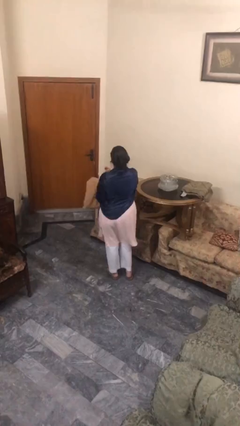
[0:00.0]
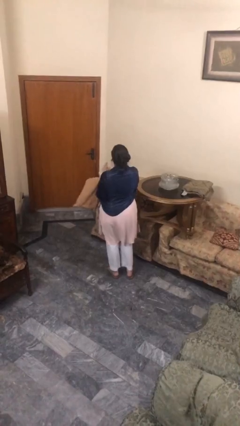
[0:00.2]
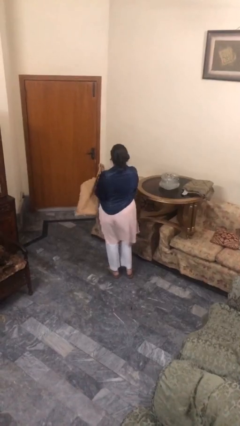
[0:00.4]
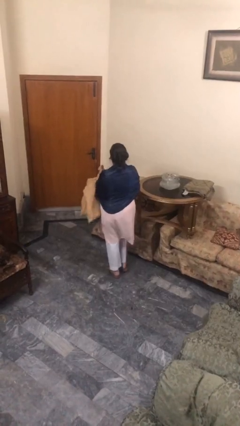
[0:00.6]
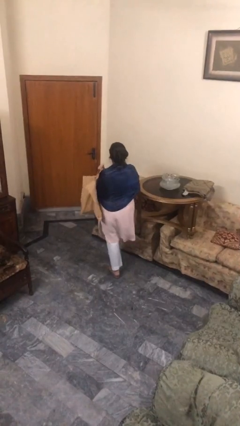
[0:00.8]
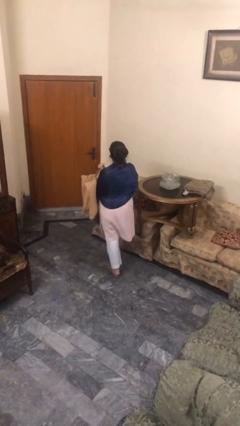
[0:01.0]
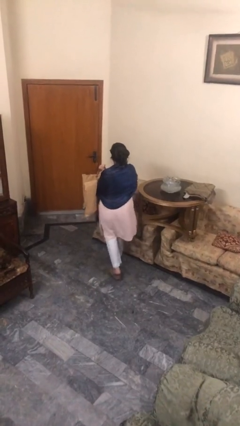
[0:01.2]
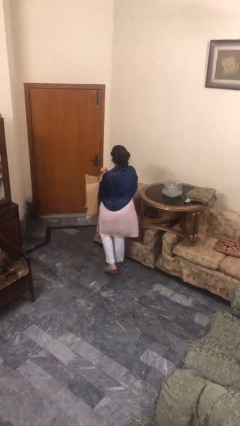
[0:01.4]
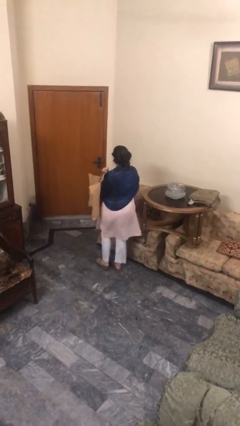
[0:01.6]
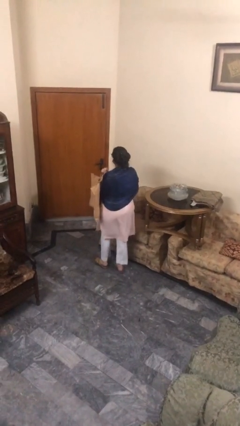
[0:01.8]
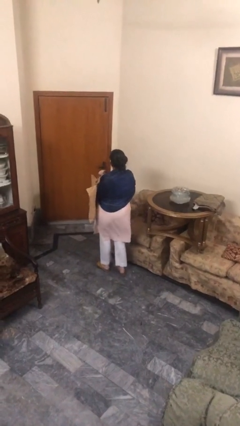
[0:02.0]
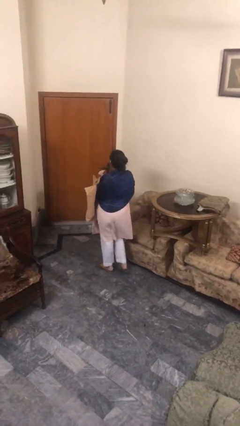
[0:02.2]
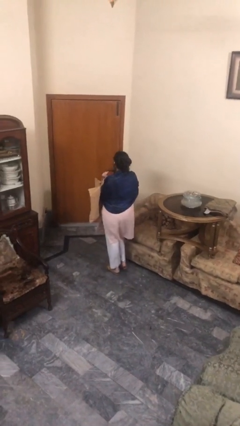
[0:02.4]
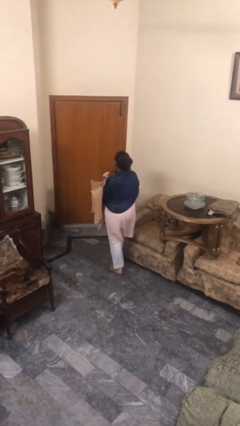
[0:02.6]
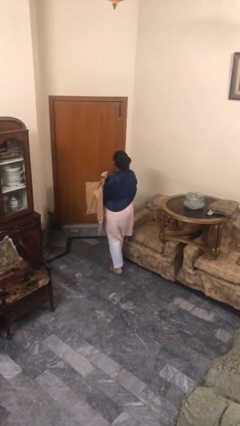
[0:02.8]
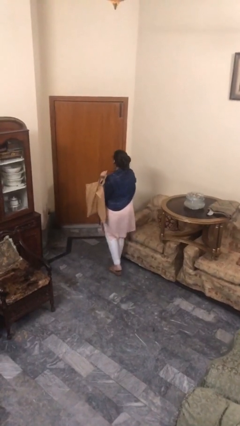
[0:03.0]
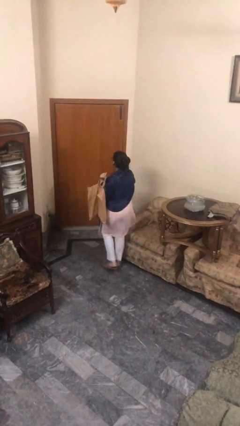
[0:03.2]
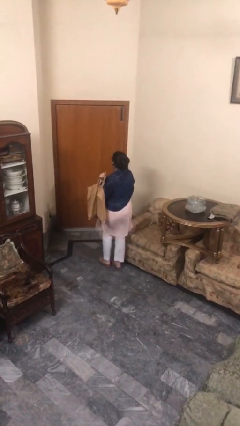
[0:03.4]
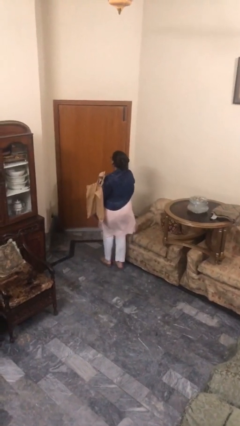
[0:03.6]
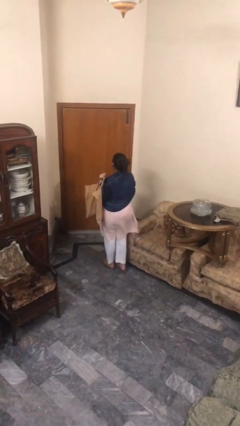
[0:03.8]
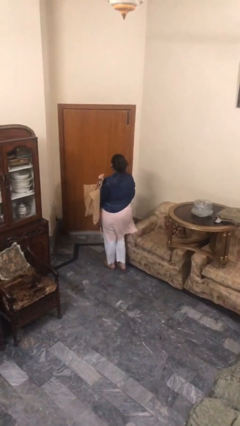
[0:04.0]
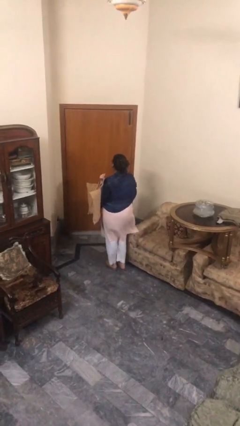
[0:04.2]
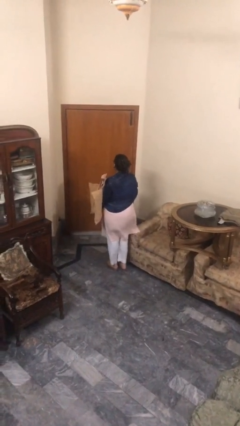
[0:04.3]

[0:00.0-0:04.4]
person carries groceries

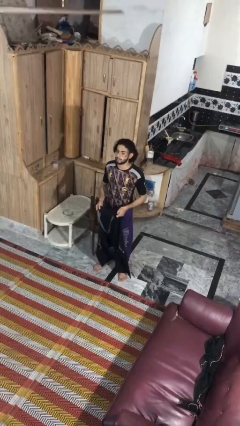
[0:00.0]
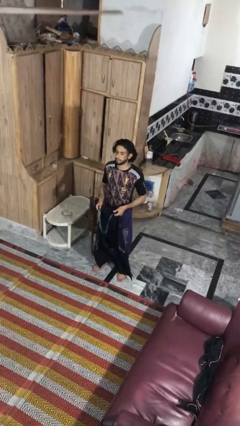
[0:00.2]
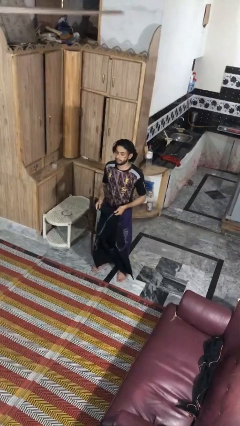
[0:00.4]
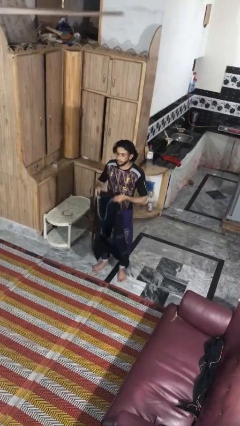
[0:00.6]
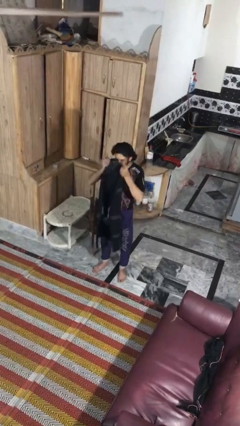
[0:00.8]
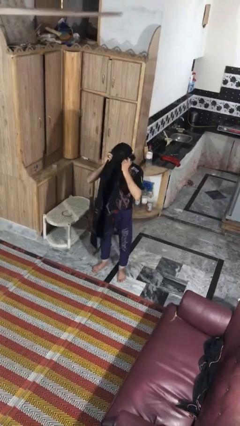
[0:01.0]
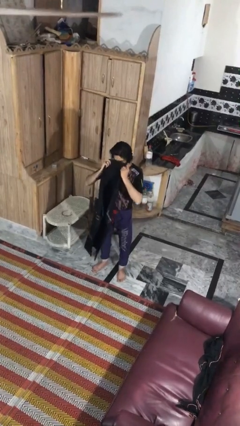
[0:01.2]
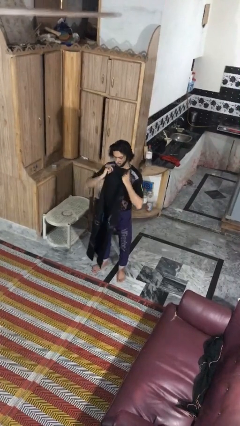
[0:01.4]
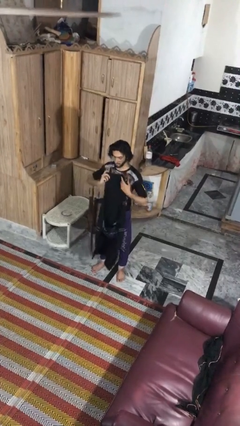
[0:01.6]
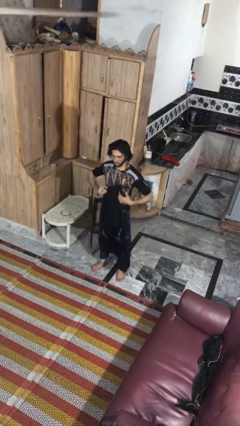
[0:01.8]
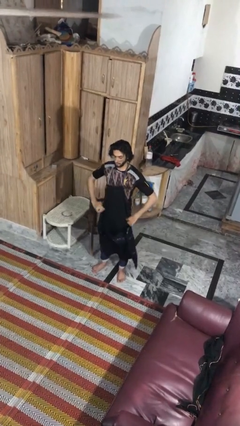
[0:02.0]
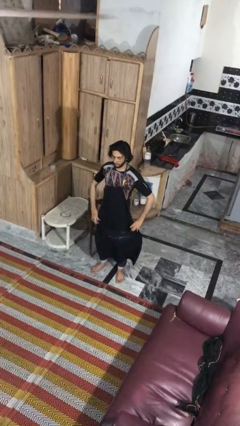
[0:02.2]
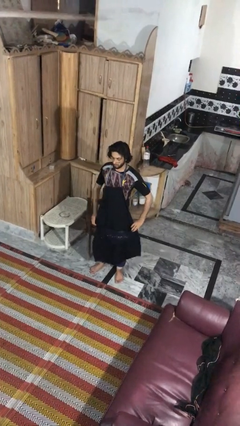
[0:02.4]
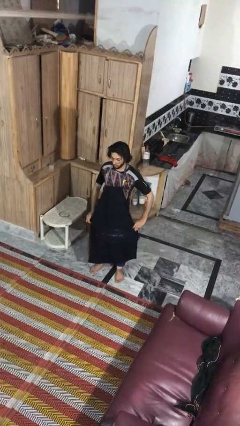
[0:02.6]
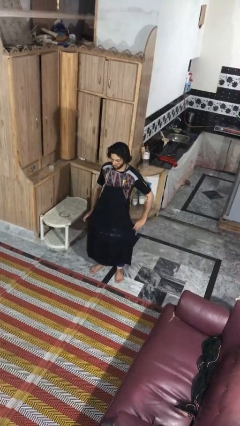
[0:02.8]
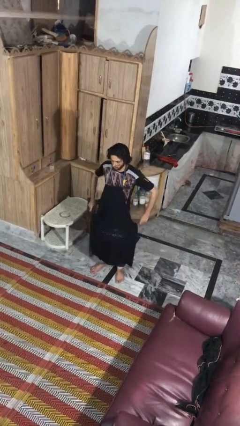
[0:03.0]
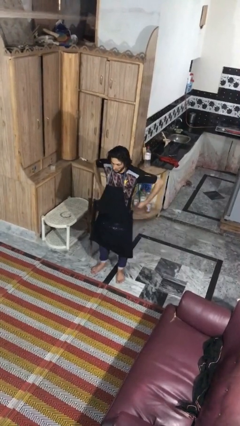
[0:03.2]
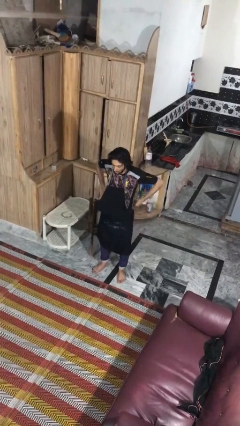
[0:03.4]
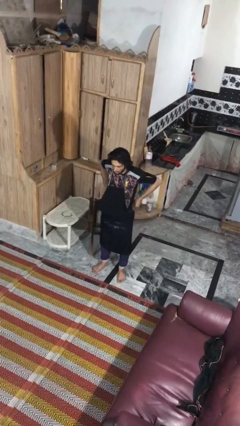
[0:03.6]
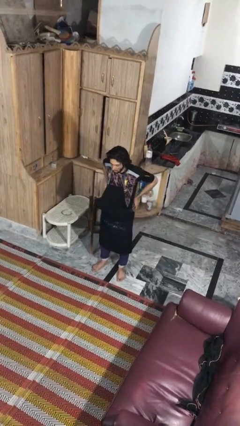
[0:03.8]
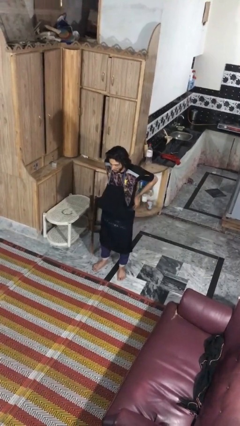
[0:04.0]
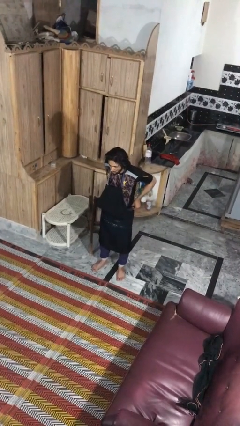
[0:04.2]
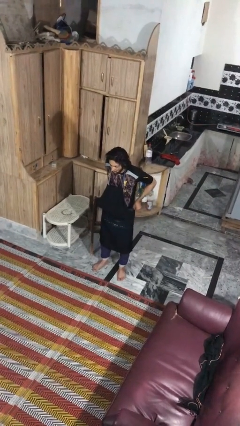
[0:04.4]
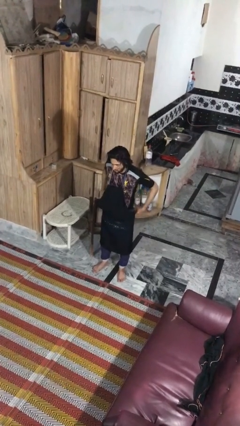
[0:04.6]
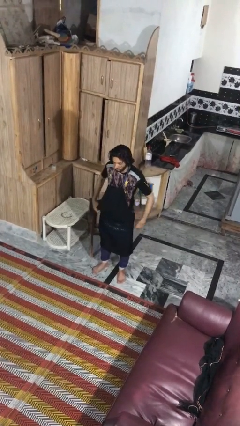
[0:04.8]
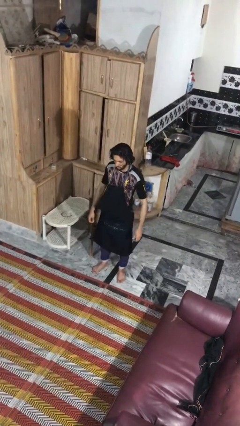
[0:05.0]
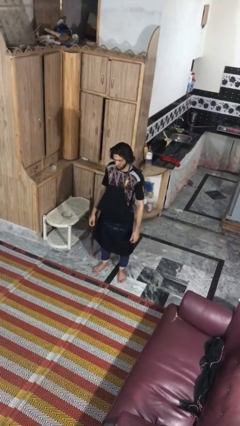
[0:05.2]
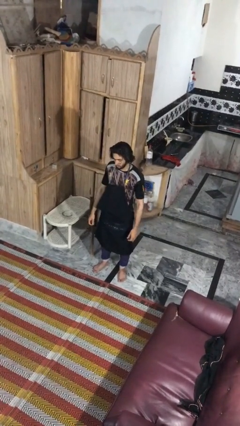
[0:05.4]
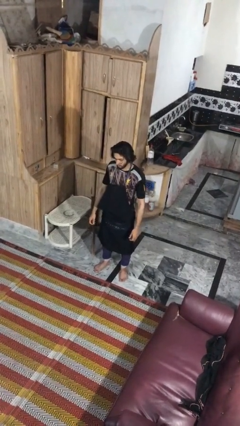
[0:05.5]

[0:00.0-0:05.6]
person puts on apron

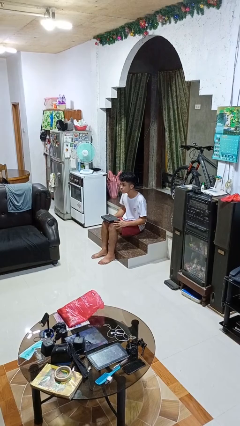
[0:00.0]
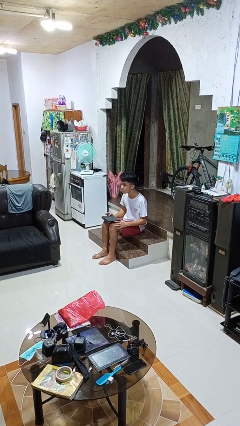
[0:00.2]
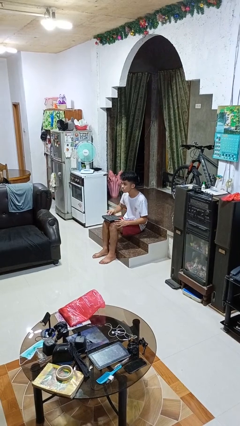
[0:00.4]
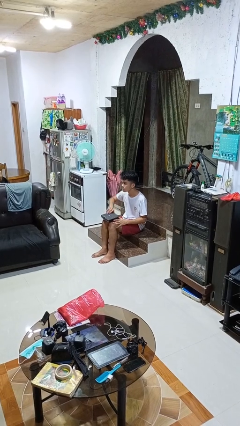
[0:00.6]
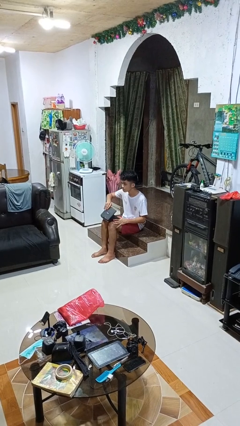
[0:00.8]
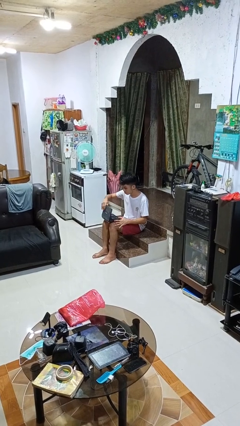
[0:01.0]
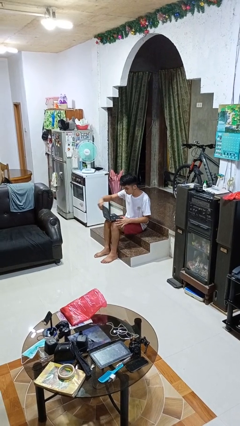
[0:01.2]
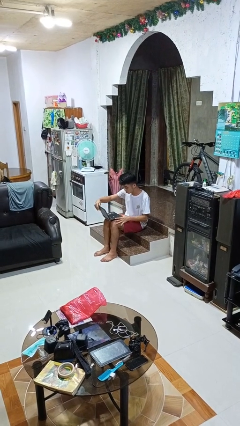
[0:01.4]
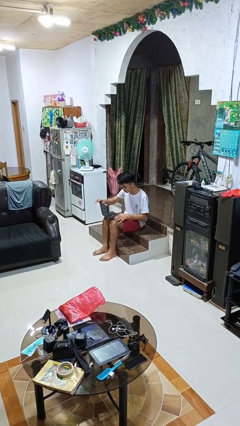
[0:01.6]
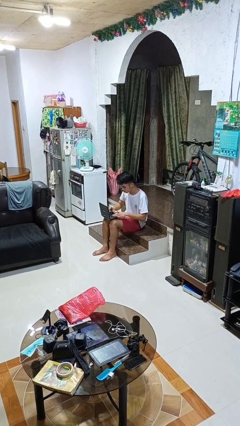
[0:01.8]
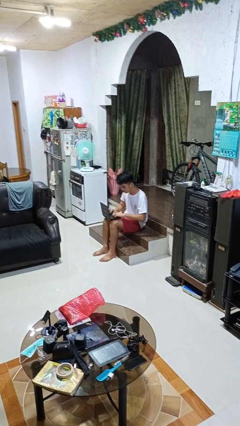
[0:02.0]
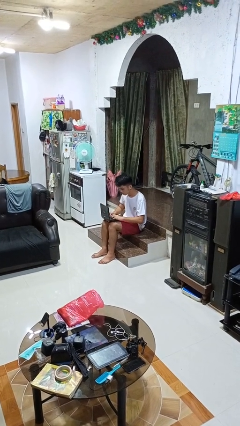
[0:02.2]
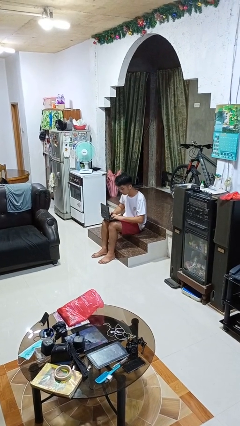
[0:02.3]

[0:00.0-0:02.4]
person opens laptop

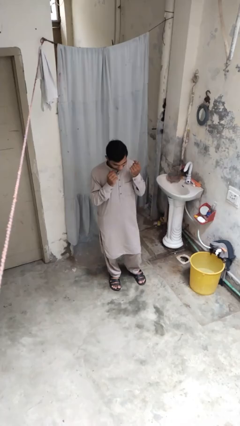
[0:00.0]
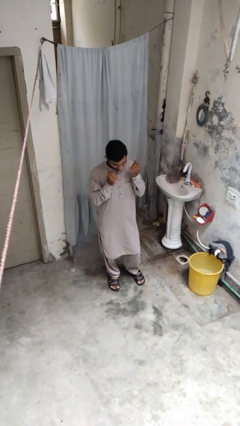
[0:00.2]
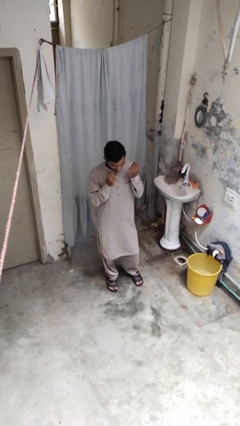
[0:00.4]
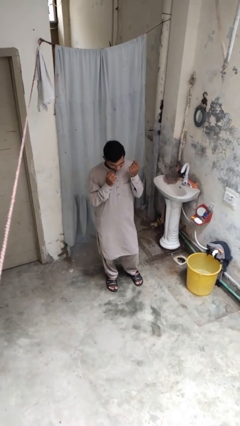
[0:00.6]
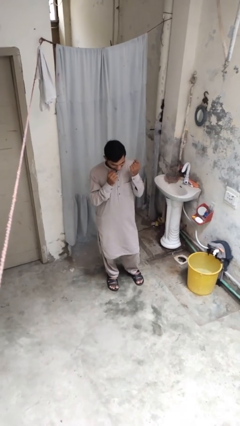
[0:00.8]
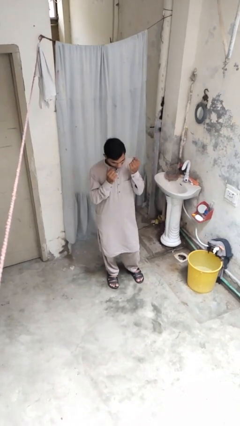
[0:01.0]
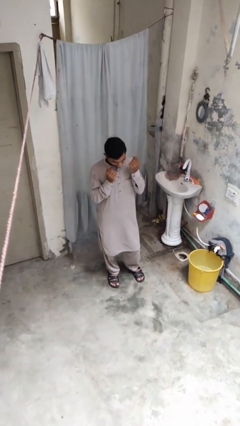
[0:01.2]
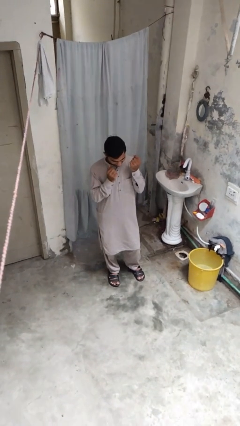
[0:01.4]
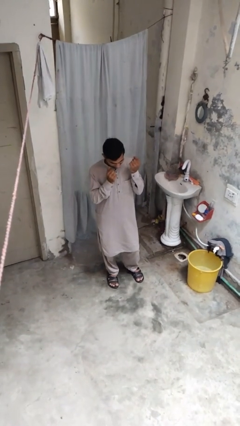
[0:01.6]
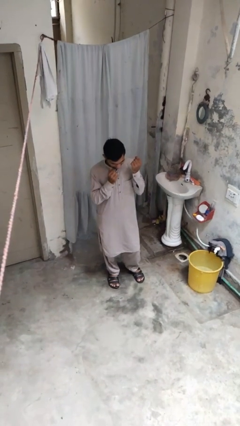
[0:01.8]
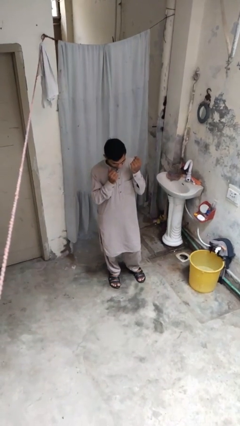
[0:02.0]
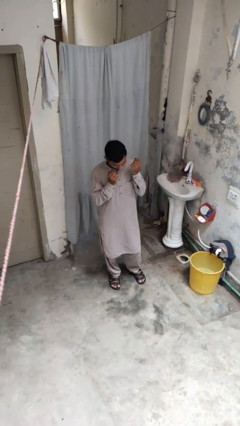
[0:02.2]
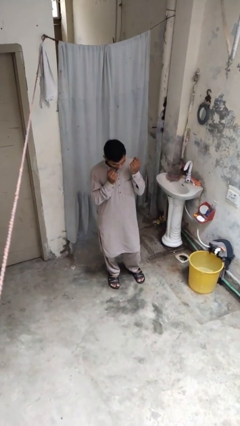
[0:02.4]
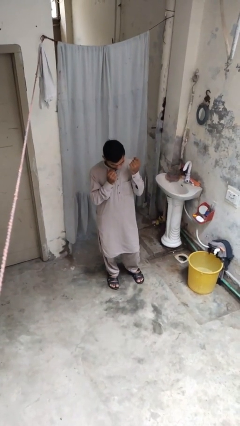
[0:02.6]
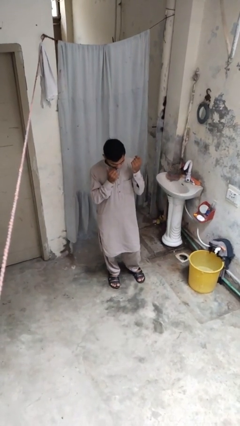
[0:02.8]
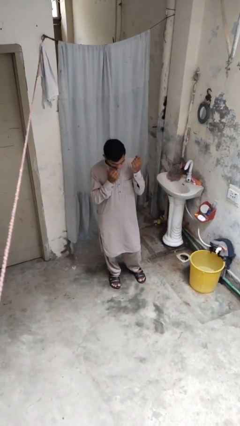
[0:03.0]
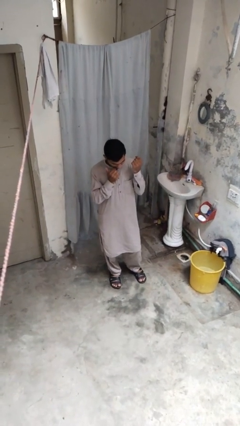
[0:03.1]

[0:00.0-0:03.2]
person flosses

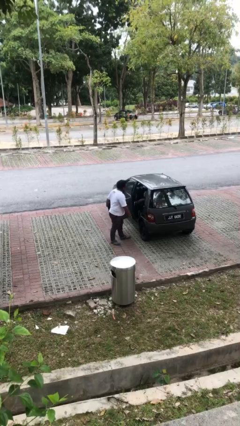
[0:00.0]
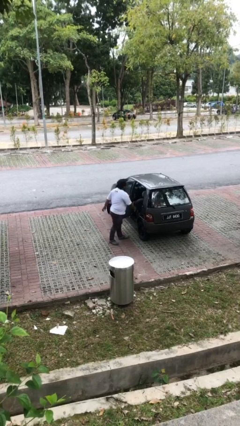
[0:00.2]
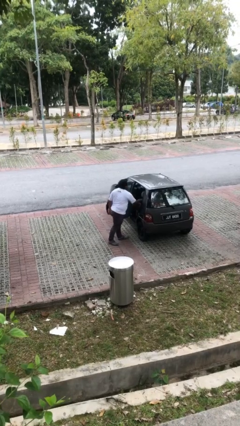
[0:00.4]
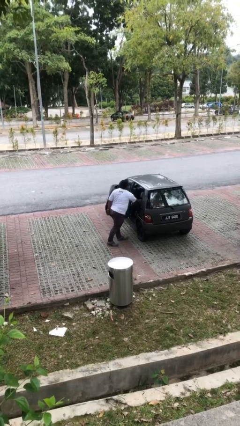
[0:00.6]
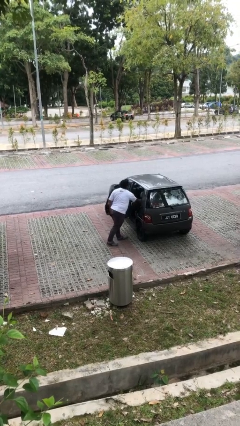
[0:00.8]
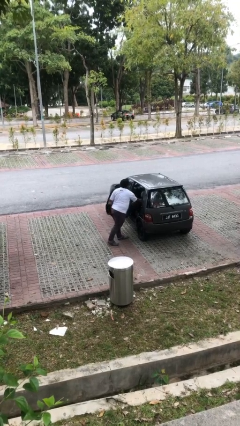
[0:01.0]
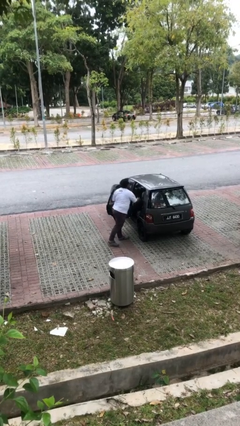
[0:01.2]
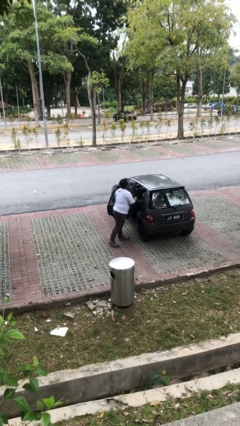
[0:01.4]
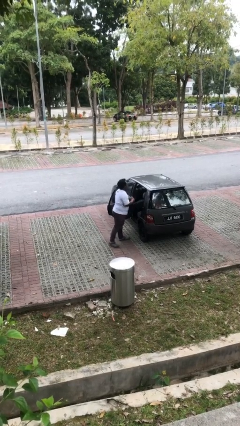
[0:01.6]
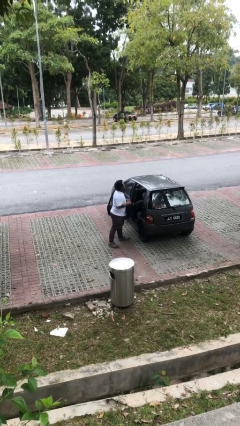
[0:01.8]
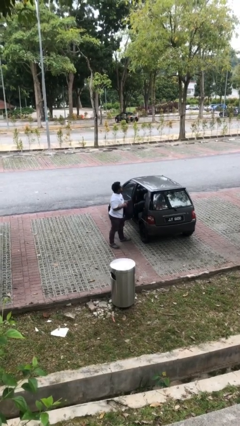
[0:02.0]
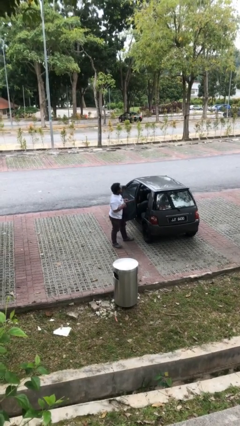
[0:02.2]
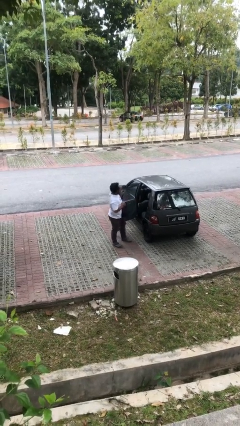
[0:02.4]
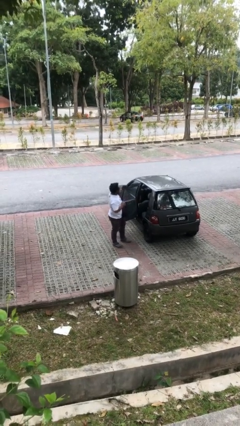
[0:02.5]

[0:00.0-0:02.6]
person unloads car
